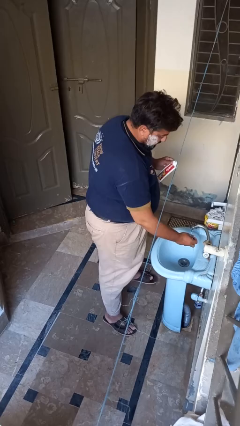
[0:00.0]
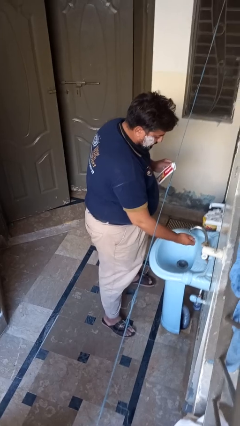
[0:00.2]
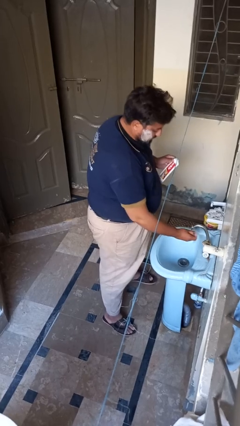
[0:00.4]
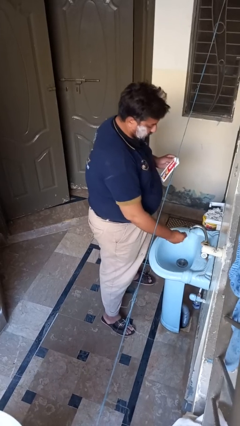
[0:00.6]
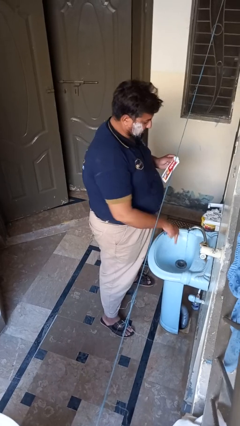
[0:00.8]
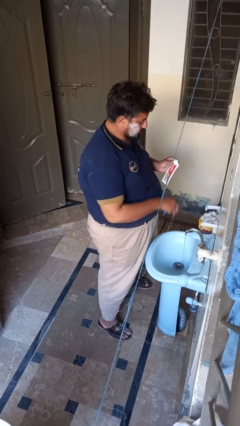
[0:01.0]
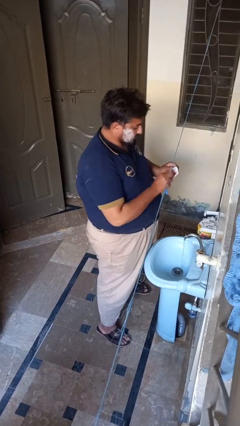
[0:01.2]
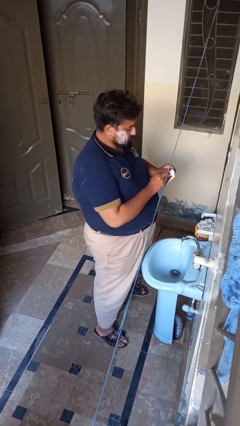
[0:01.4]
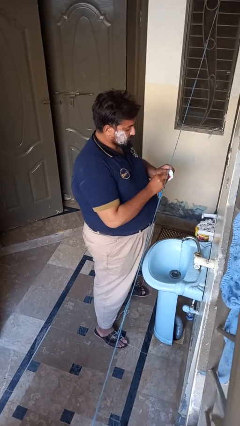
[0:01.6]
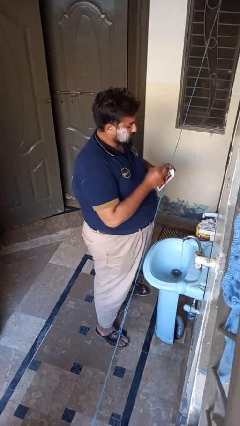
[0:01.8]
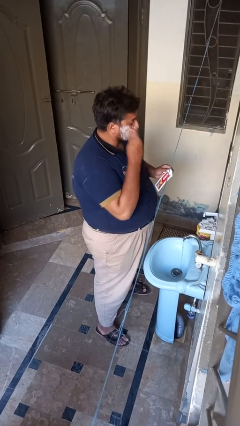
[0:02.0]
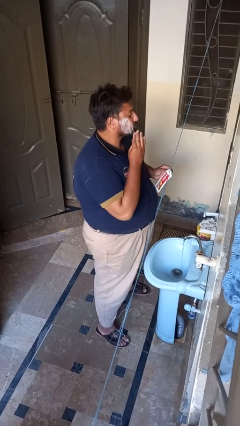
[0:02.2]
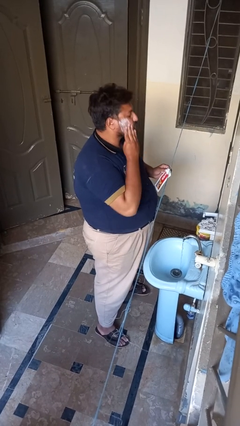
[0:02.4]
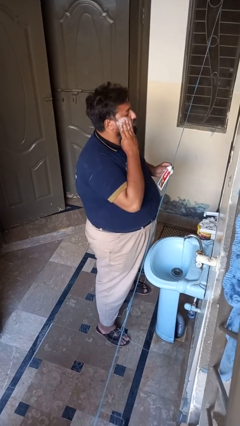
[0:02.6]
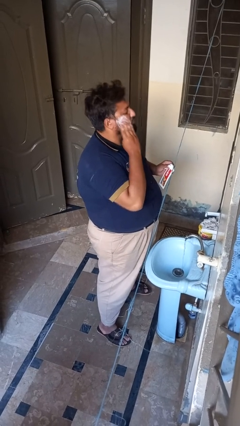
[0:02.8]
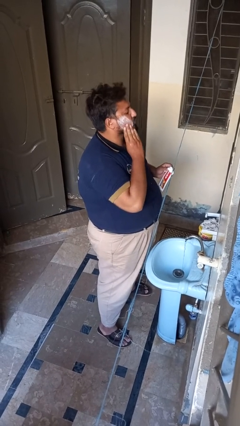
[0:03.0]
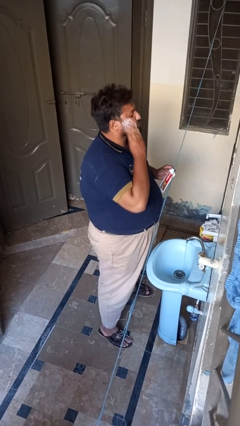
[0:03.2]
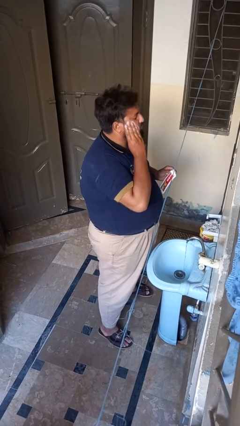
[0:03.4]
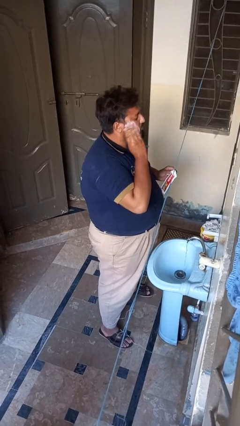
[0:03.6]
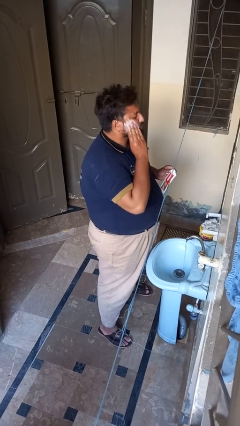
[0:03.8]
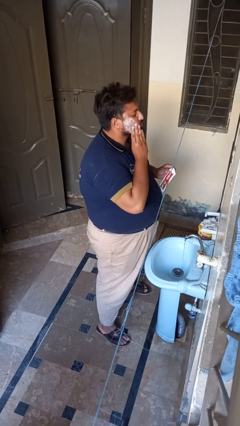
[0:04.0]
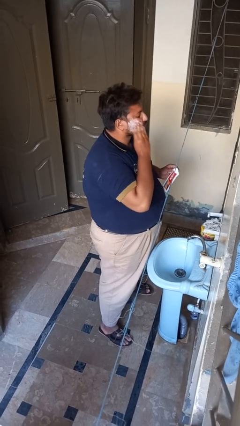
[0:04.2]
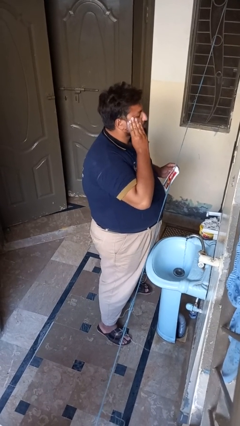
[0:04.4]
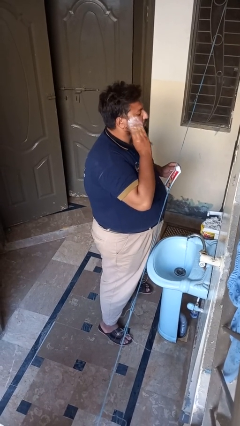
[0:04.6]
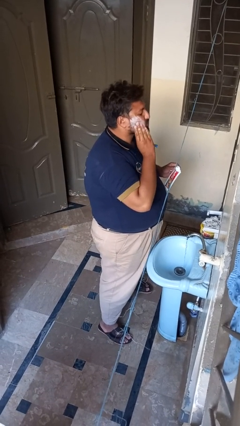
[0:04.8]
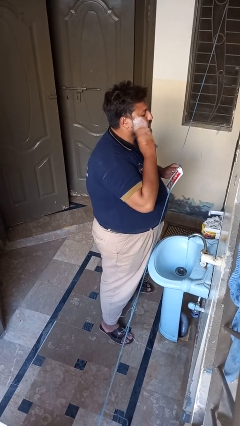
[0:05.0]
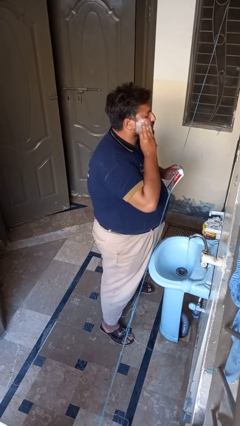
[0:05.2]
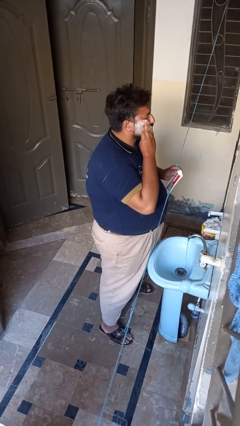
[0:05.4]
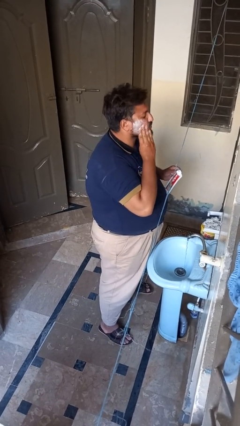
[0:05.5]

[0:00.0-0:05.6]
person applies shaving cream

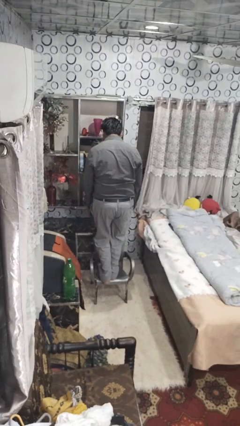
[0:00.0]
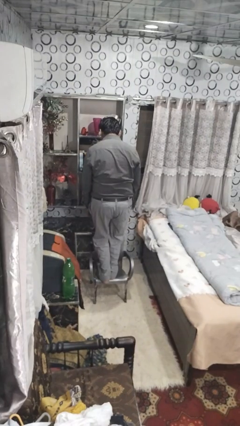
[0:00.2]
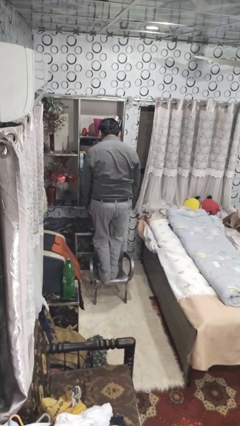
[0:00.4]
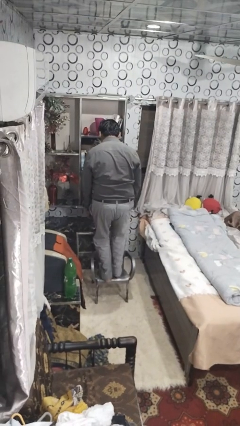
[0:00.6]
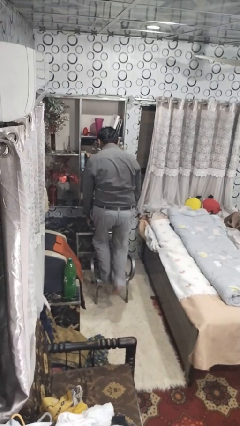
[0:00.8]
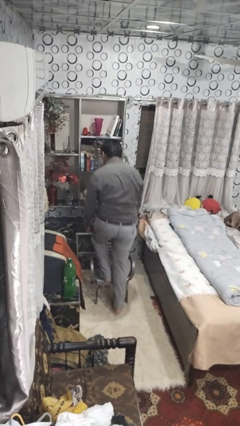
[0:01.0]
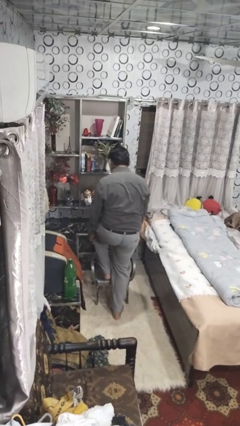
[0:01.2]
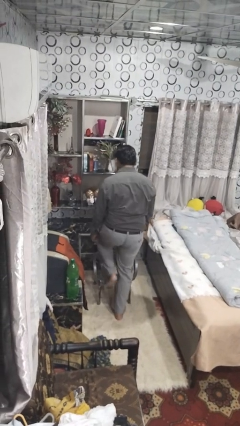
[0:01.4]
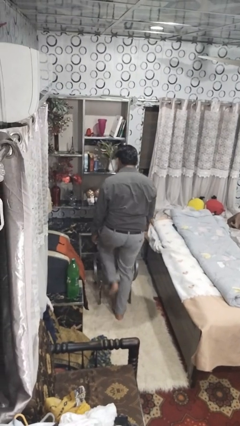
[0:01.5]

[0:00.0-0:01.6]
person climbs off chair

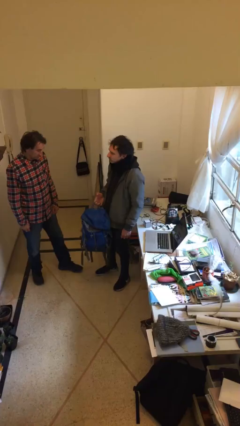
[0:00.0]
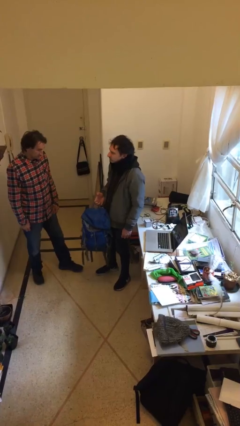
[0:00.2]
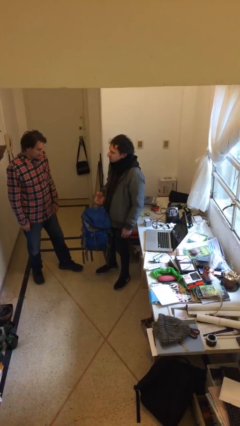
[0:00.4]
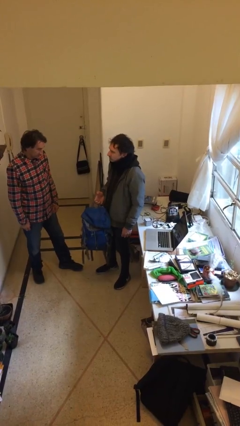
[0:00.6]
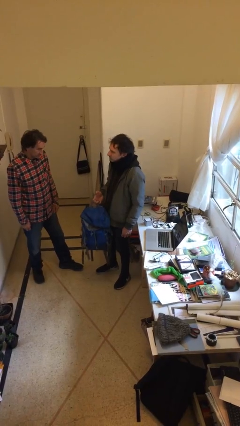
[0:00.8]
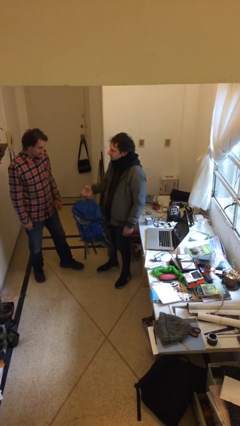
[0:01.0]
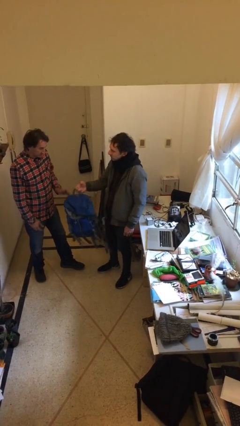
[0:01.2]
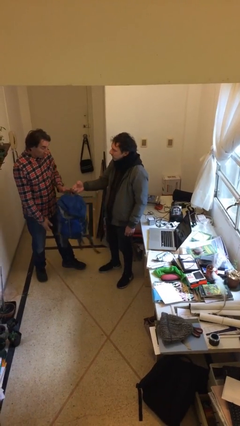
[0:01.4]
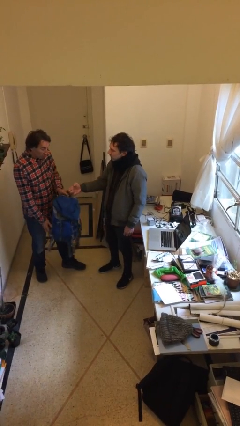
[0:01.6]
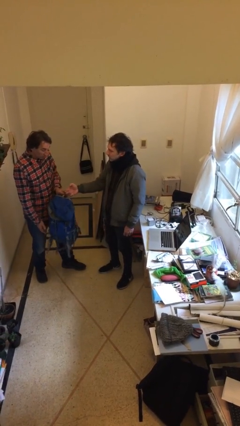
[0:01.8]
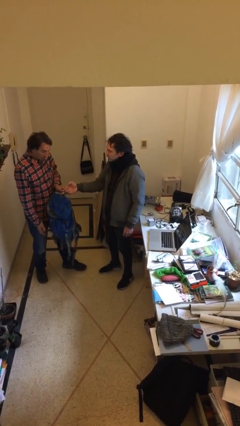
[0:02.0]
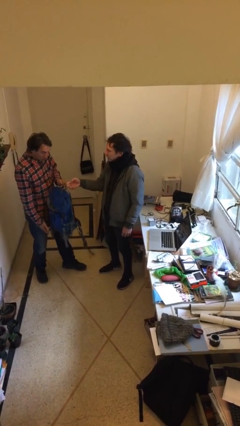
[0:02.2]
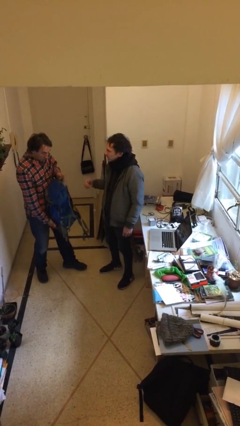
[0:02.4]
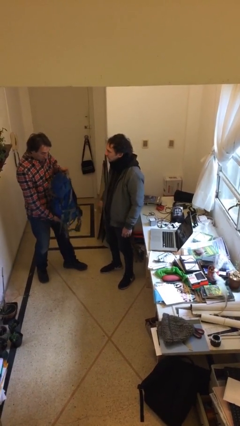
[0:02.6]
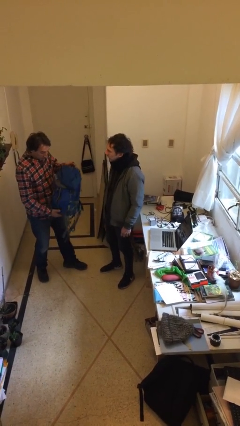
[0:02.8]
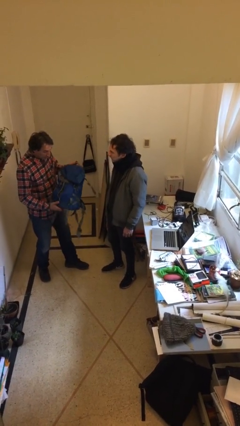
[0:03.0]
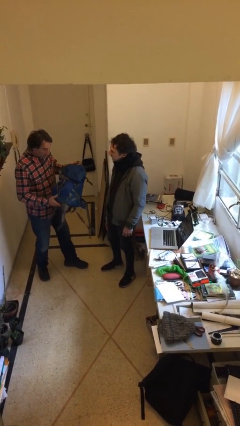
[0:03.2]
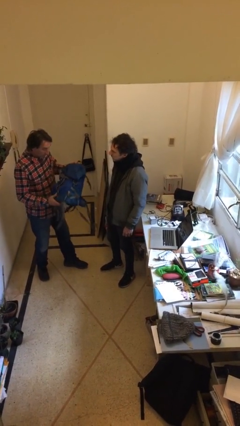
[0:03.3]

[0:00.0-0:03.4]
person transfers object to person

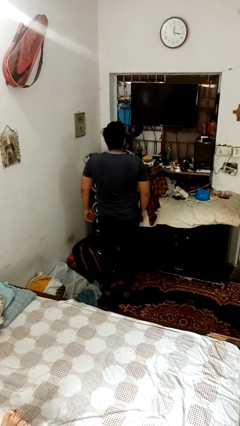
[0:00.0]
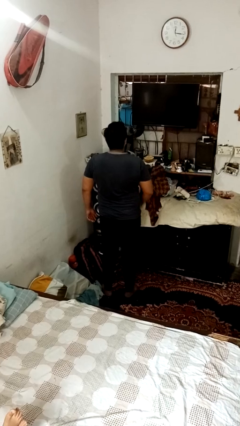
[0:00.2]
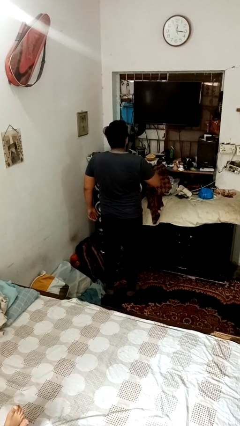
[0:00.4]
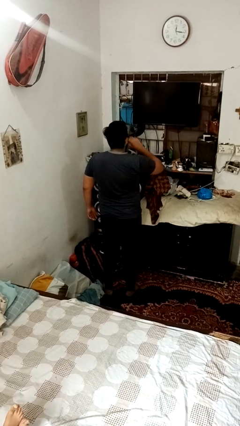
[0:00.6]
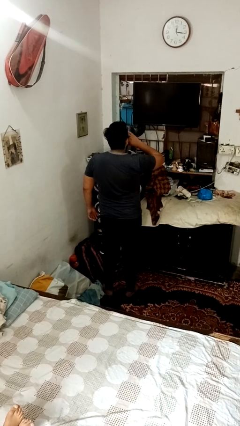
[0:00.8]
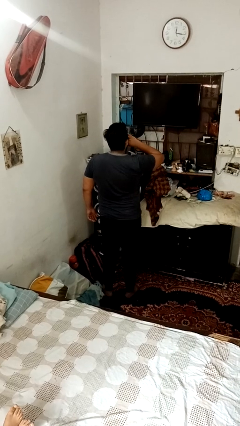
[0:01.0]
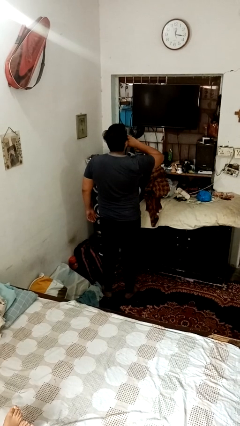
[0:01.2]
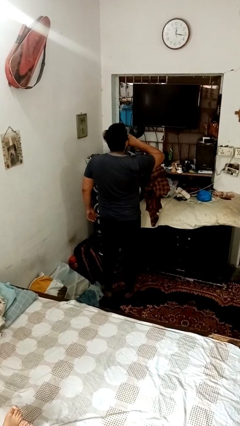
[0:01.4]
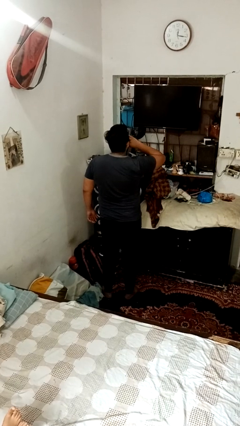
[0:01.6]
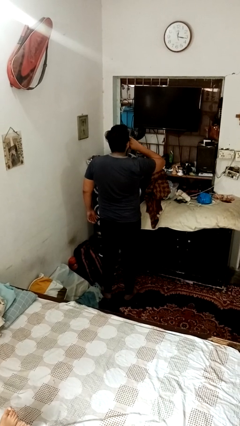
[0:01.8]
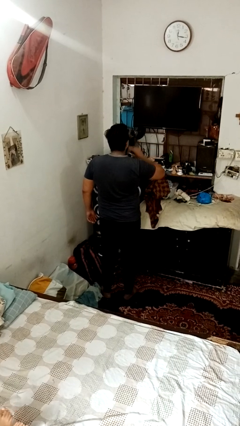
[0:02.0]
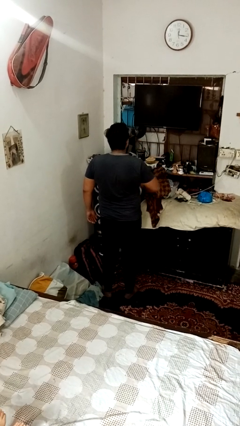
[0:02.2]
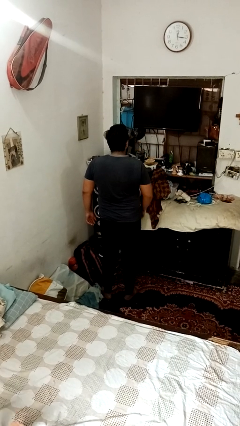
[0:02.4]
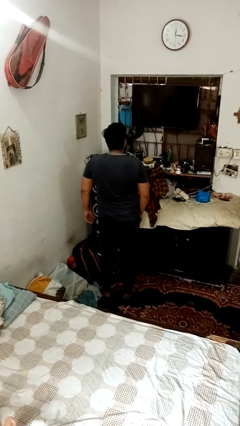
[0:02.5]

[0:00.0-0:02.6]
person yawns

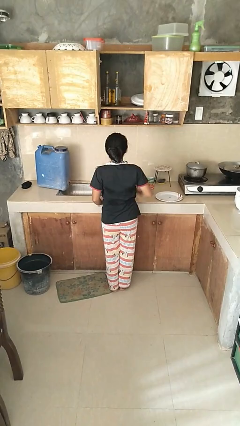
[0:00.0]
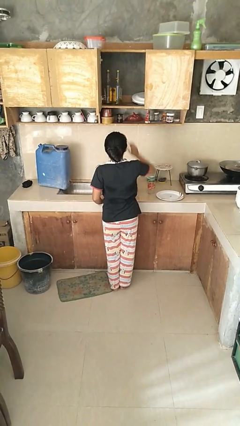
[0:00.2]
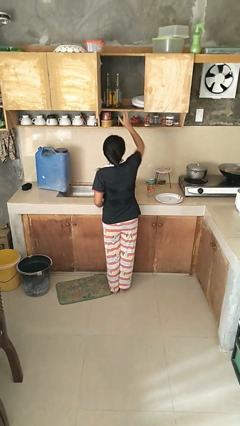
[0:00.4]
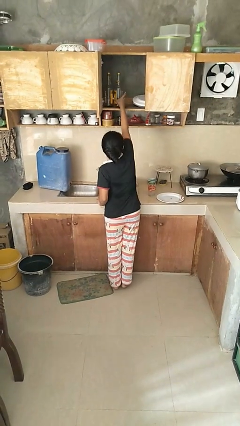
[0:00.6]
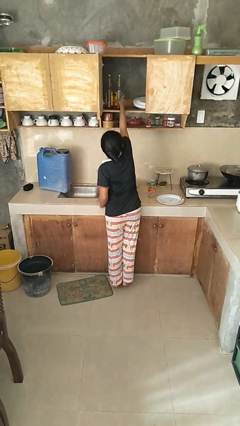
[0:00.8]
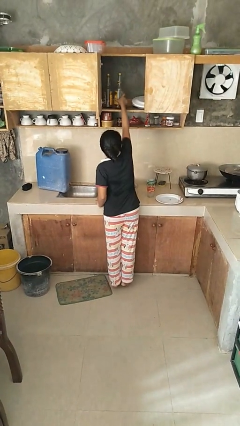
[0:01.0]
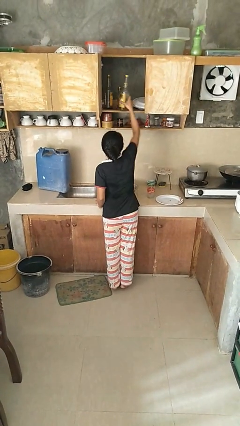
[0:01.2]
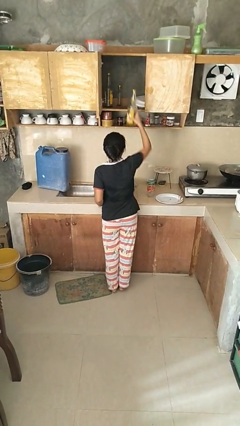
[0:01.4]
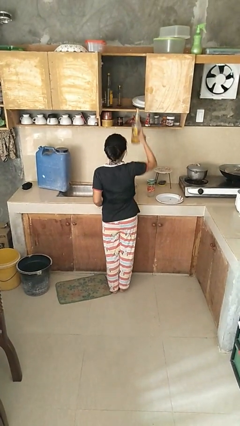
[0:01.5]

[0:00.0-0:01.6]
person takes object from cabinet

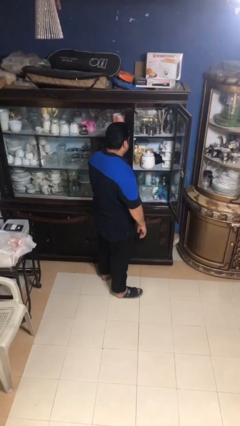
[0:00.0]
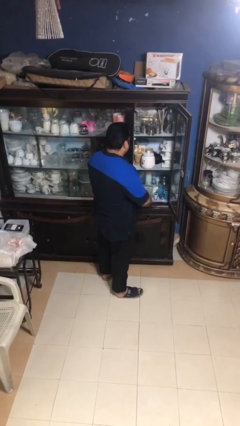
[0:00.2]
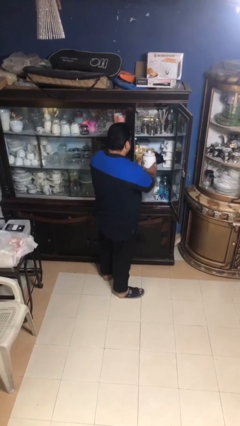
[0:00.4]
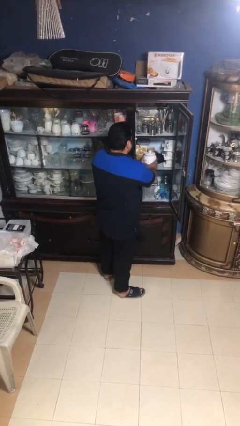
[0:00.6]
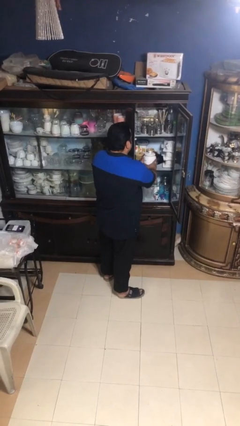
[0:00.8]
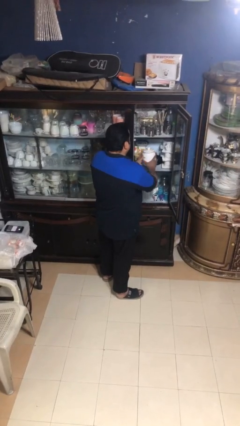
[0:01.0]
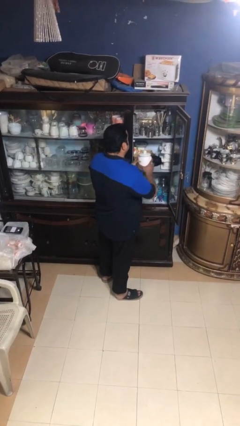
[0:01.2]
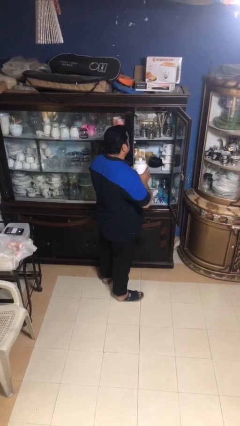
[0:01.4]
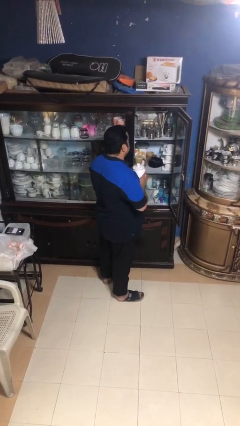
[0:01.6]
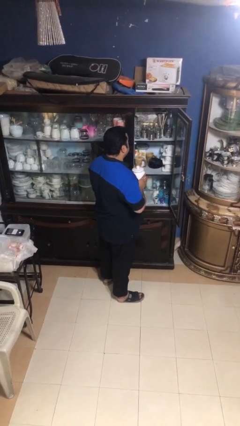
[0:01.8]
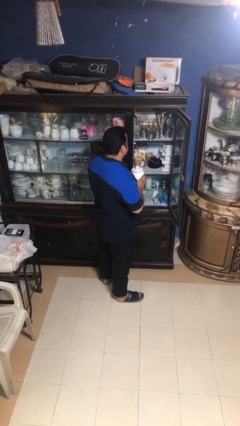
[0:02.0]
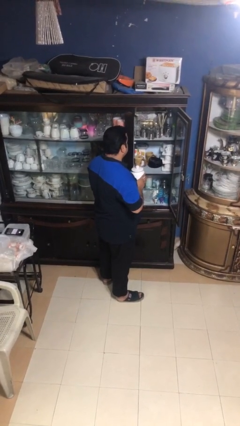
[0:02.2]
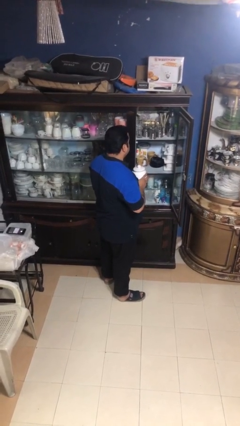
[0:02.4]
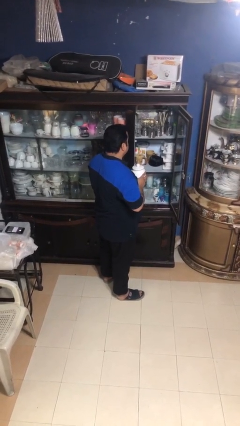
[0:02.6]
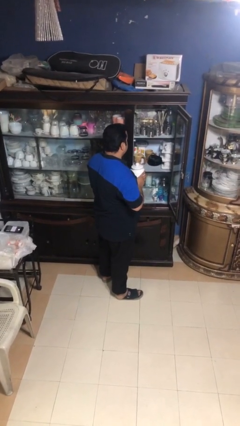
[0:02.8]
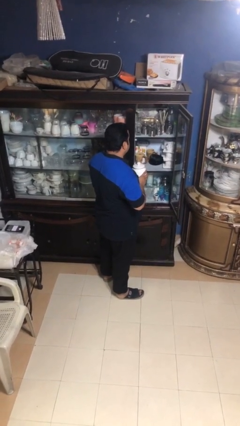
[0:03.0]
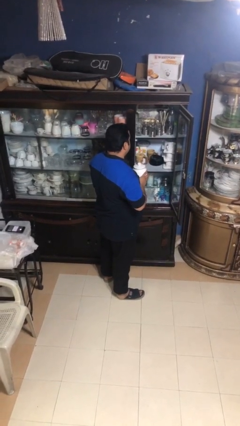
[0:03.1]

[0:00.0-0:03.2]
person picks up object from cabinet
